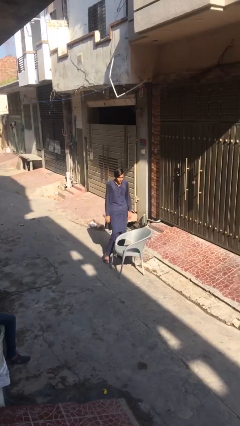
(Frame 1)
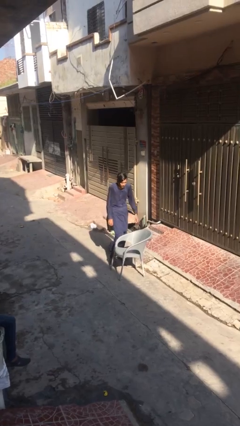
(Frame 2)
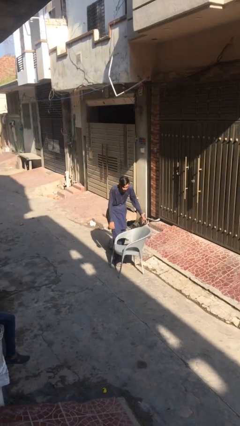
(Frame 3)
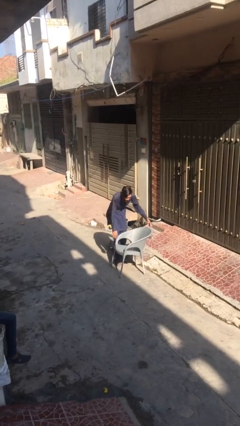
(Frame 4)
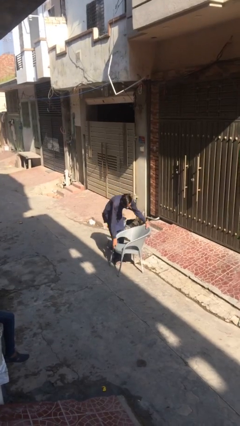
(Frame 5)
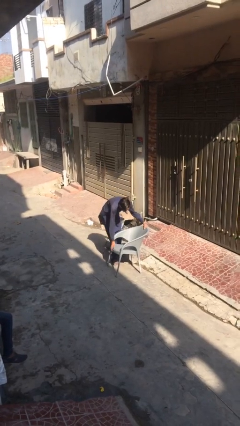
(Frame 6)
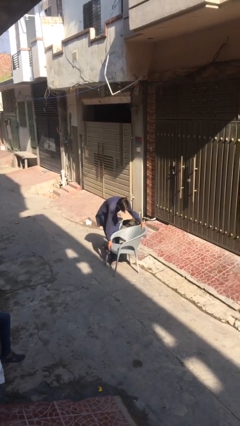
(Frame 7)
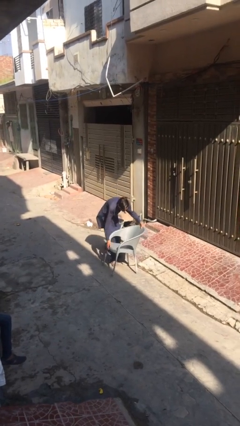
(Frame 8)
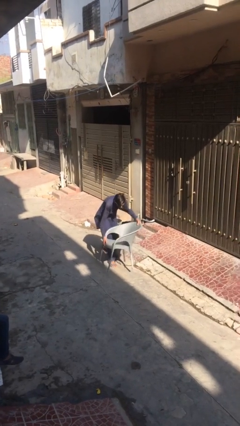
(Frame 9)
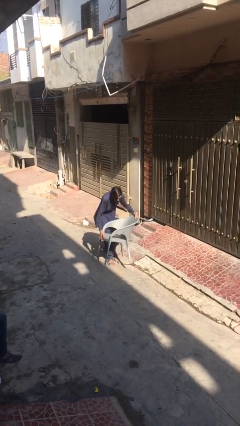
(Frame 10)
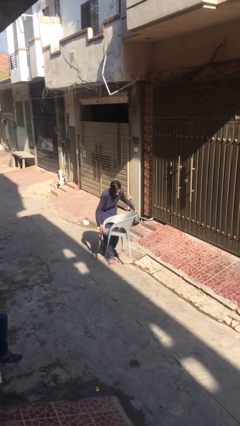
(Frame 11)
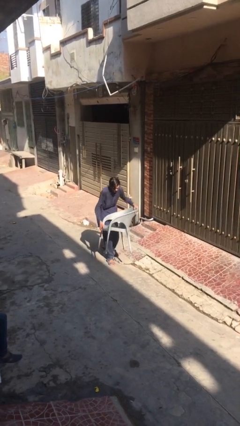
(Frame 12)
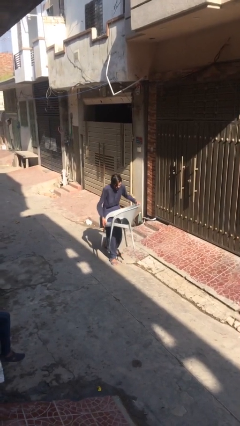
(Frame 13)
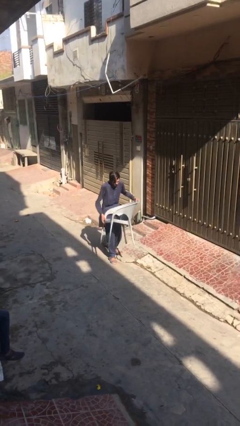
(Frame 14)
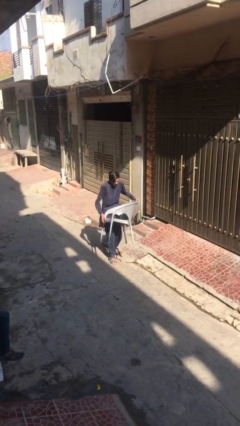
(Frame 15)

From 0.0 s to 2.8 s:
person picks up object from floor

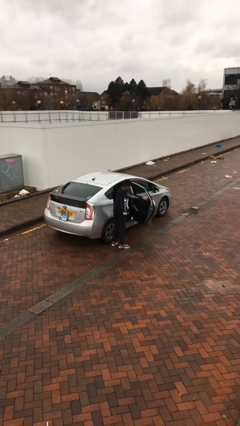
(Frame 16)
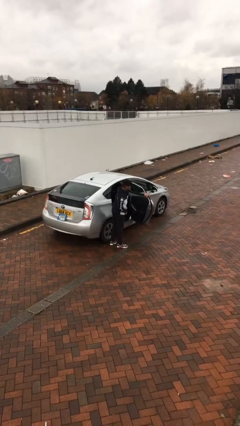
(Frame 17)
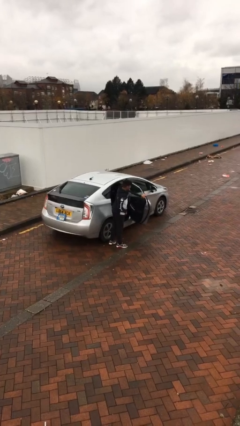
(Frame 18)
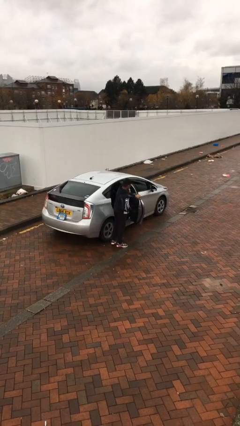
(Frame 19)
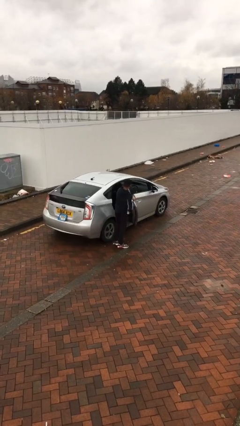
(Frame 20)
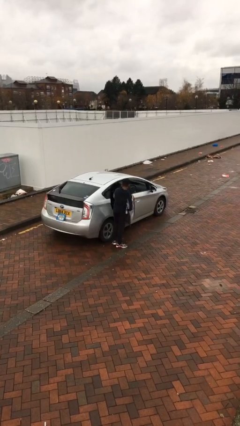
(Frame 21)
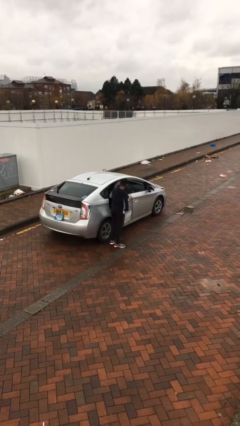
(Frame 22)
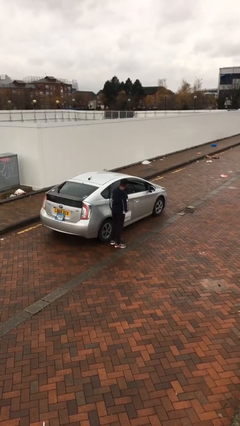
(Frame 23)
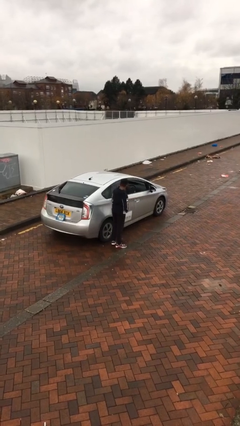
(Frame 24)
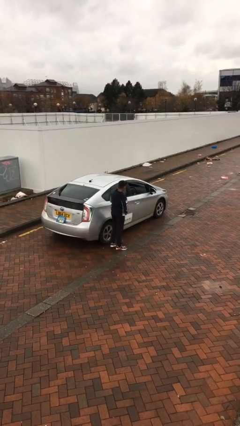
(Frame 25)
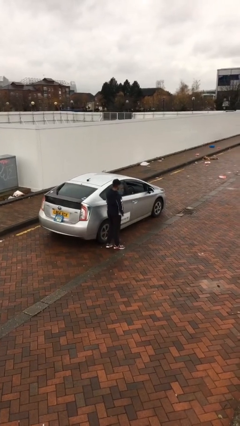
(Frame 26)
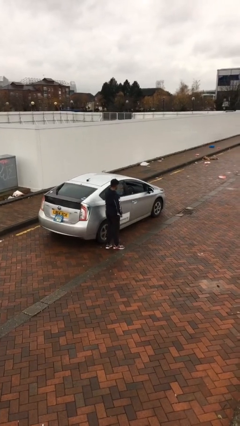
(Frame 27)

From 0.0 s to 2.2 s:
person closes car door

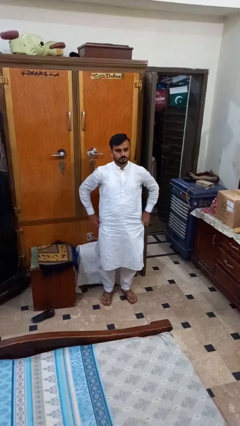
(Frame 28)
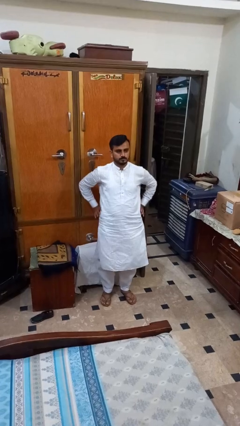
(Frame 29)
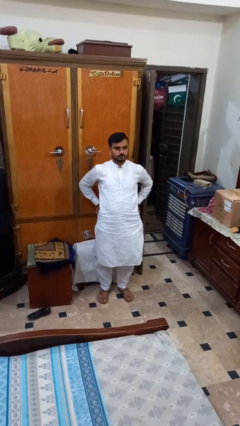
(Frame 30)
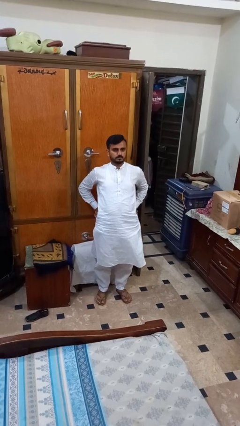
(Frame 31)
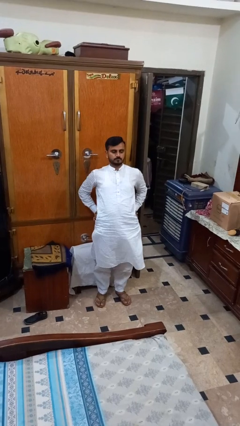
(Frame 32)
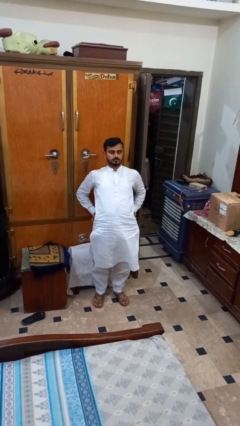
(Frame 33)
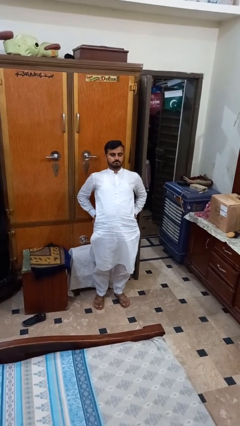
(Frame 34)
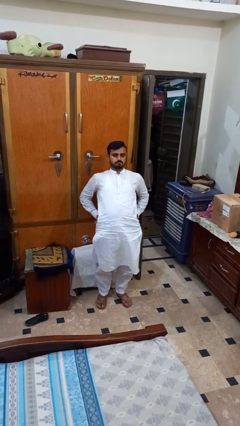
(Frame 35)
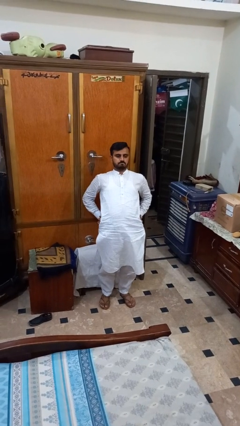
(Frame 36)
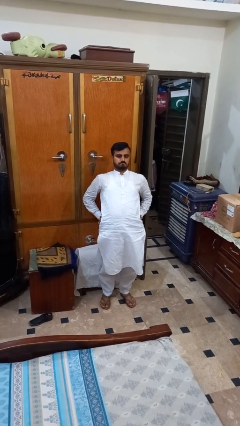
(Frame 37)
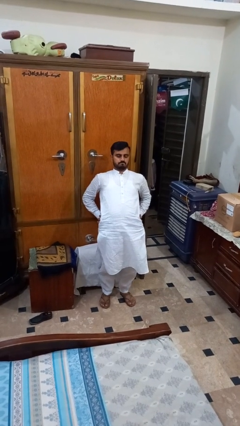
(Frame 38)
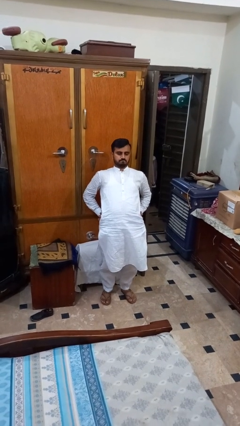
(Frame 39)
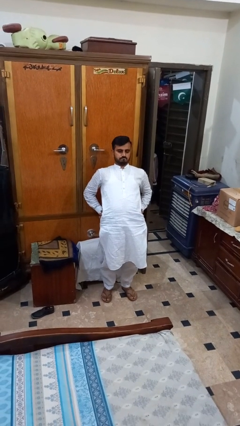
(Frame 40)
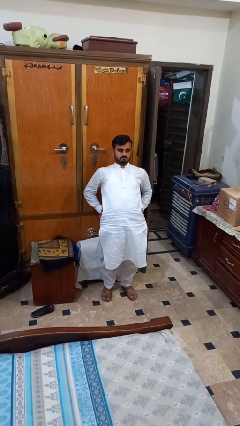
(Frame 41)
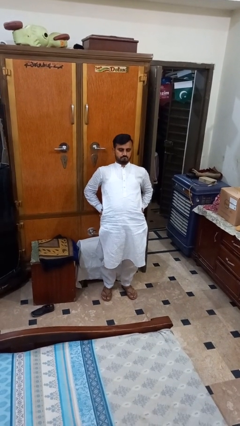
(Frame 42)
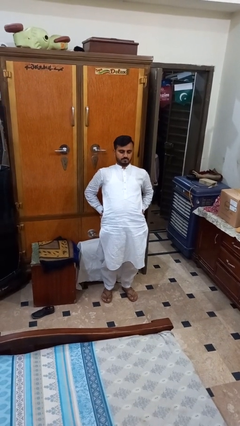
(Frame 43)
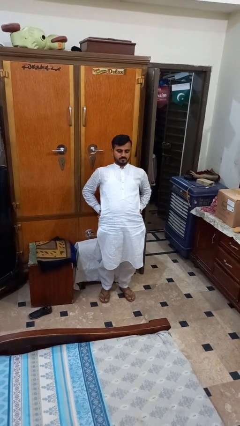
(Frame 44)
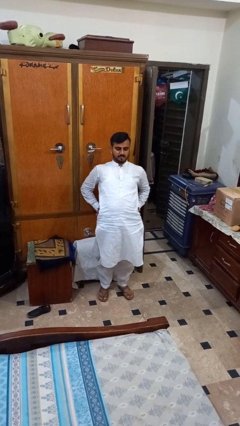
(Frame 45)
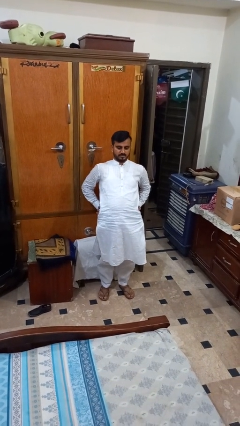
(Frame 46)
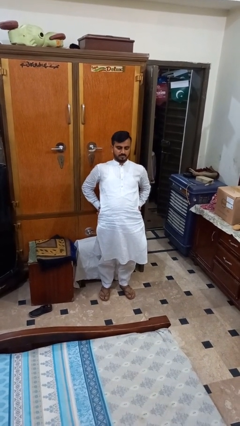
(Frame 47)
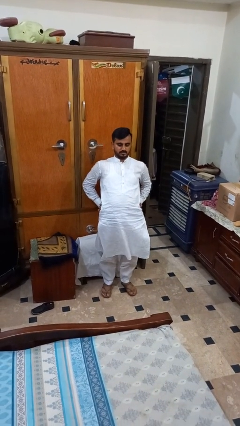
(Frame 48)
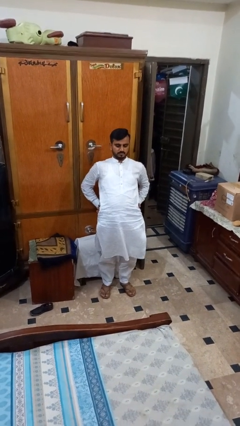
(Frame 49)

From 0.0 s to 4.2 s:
person stretches back

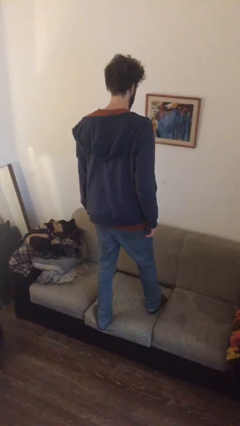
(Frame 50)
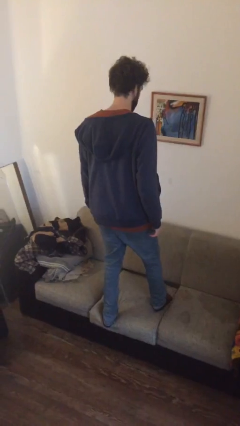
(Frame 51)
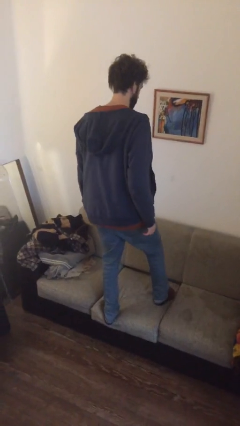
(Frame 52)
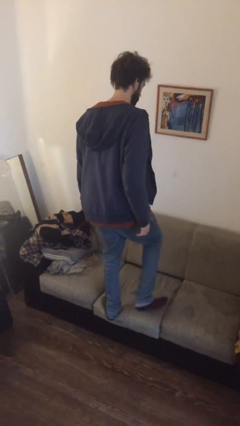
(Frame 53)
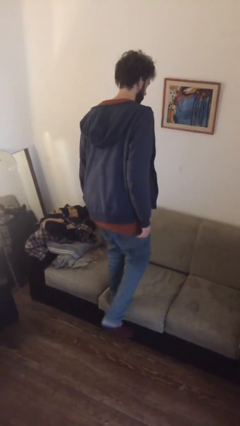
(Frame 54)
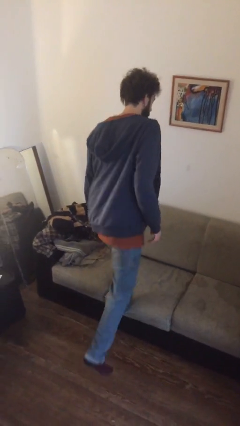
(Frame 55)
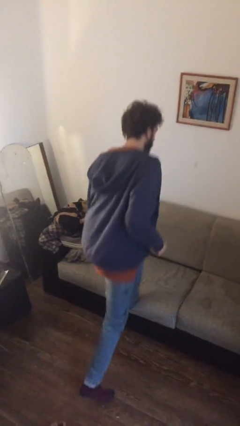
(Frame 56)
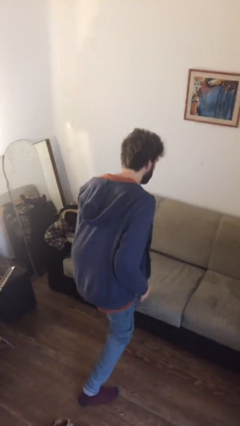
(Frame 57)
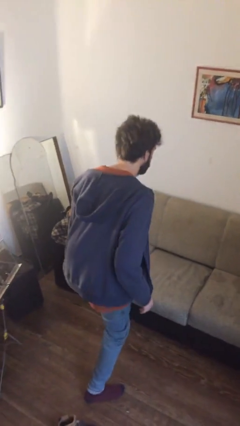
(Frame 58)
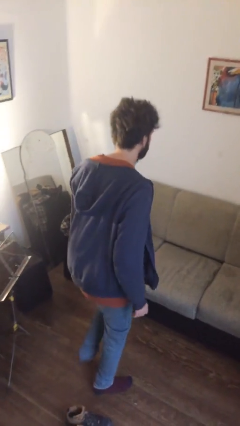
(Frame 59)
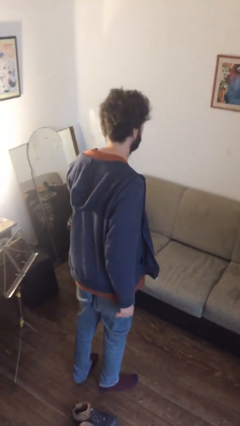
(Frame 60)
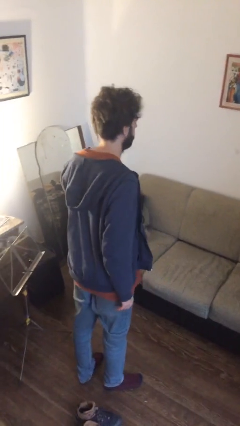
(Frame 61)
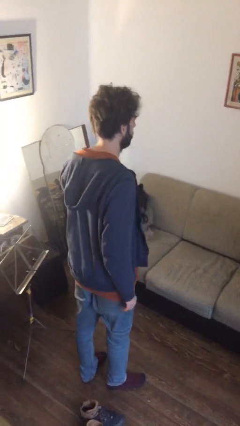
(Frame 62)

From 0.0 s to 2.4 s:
person climbs off couch

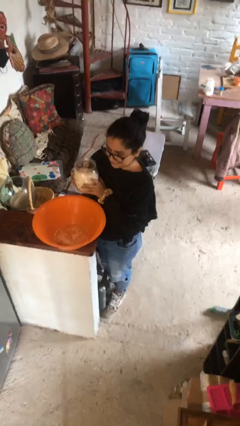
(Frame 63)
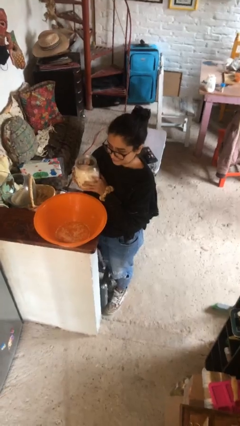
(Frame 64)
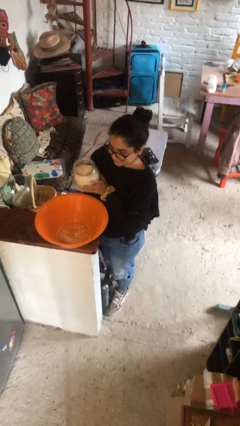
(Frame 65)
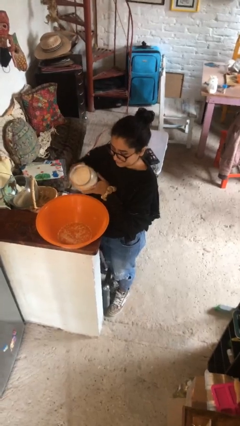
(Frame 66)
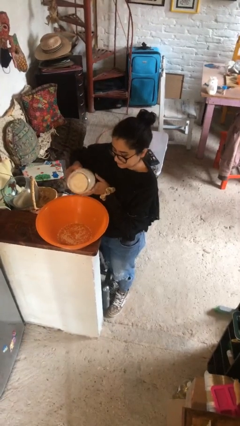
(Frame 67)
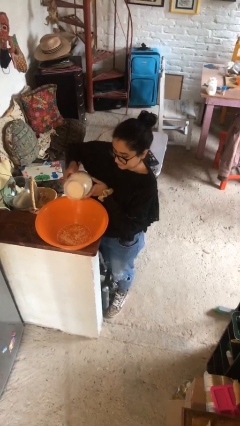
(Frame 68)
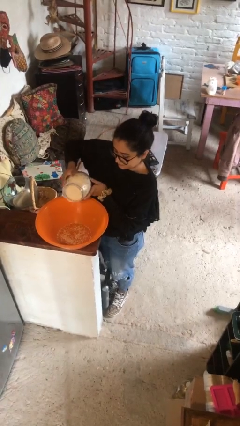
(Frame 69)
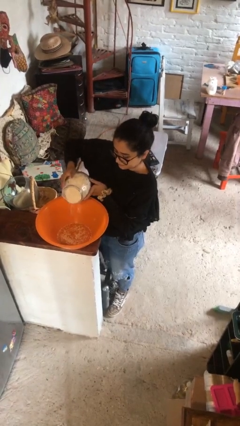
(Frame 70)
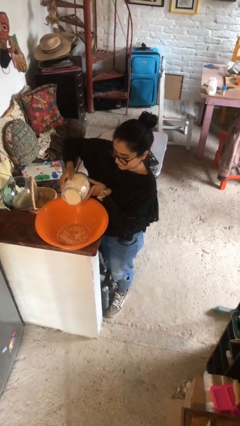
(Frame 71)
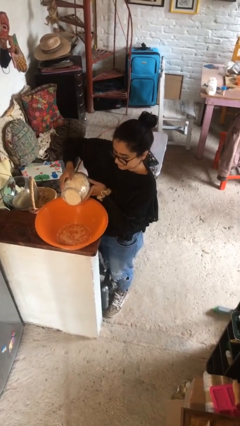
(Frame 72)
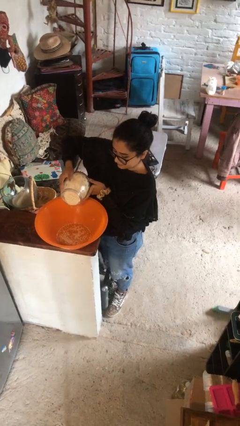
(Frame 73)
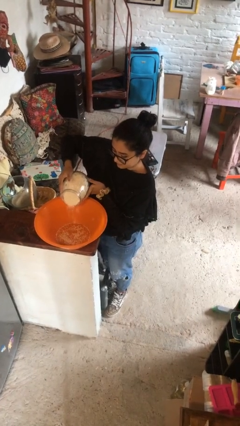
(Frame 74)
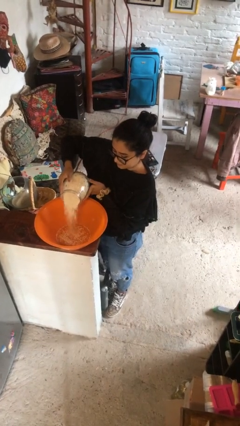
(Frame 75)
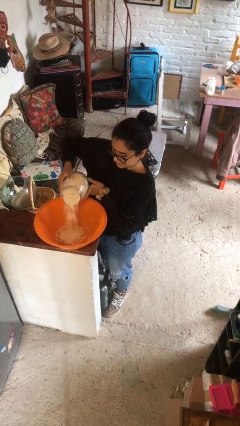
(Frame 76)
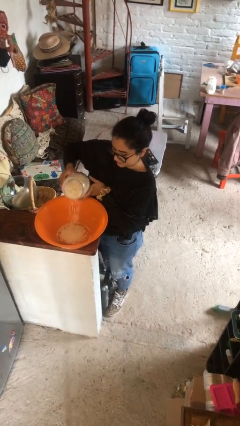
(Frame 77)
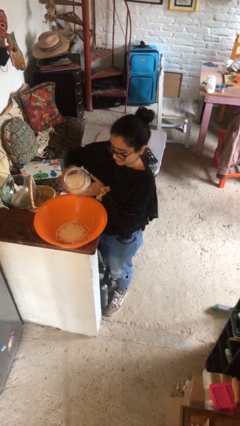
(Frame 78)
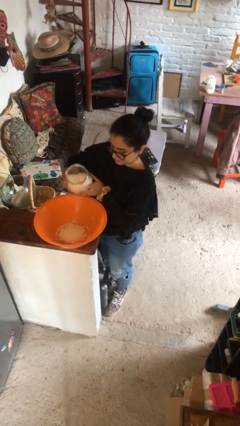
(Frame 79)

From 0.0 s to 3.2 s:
person pours into bowl

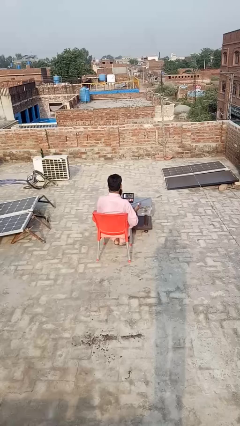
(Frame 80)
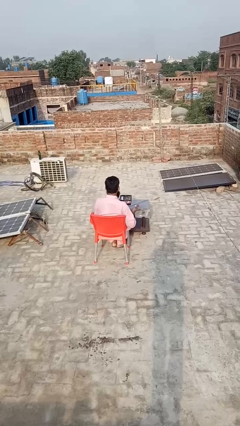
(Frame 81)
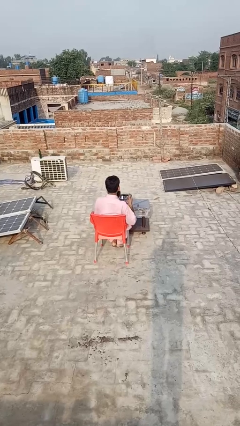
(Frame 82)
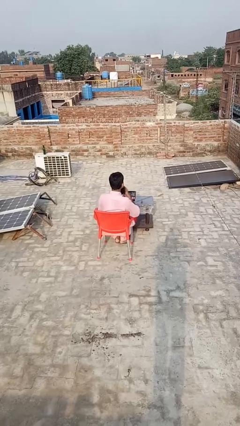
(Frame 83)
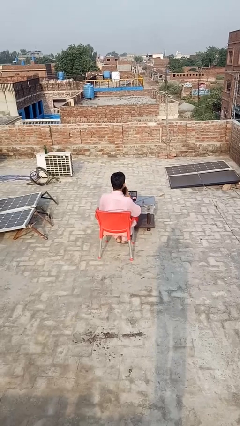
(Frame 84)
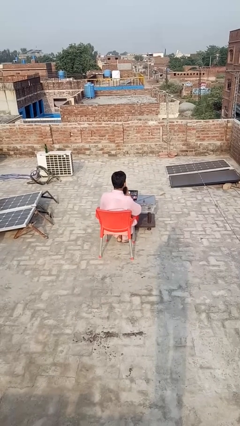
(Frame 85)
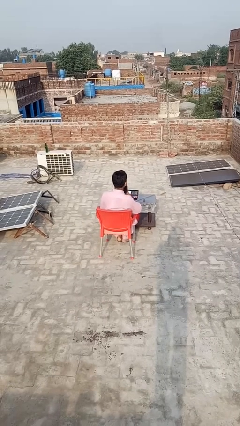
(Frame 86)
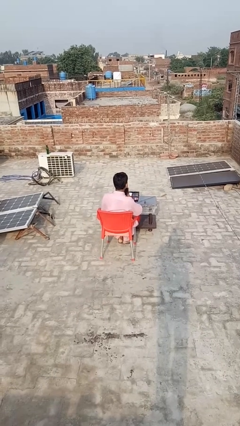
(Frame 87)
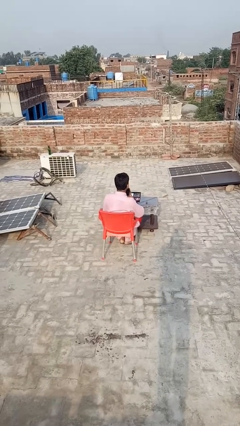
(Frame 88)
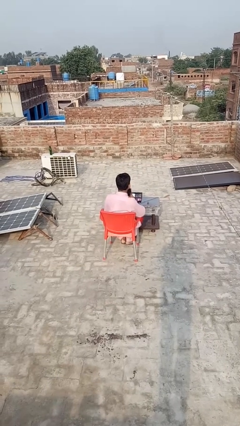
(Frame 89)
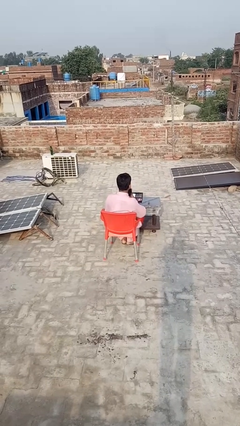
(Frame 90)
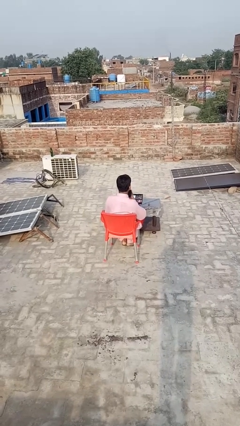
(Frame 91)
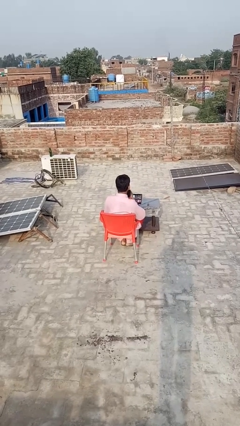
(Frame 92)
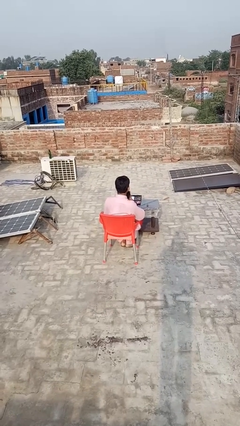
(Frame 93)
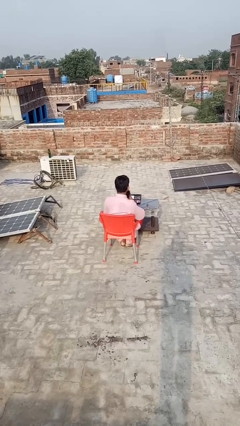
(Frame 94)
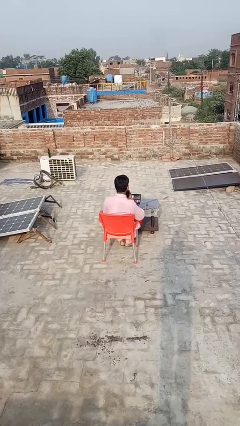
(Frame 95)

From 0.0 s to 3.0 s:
person applies lip makeup
